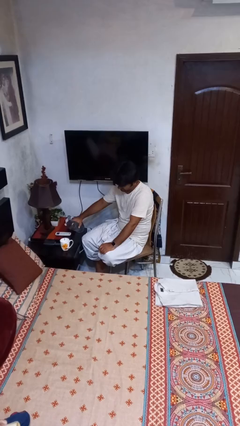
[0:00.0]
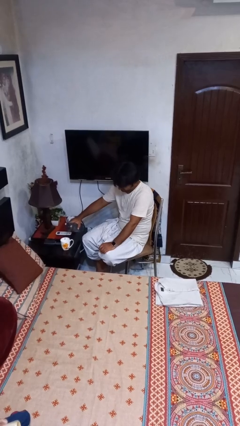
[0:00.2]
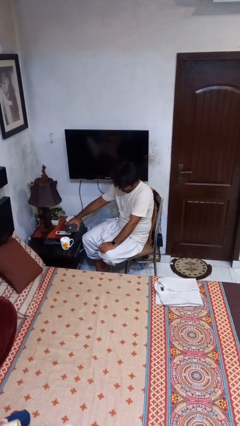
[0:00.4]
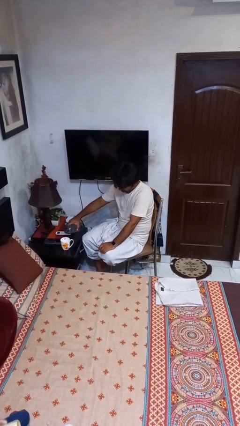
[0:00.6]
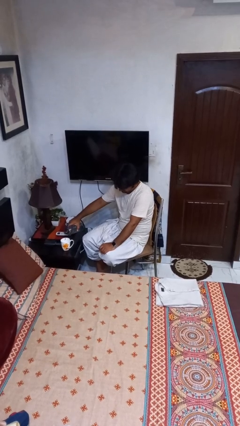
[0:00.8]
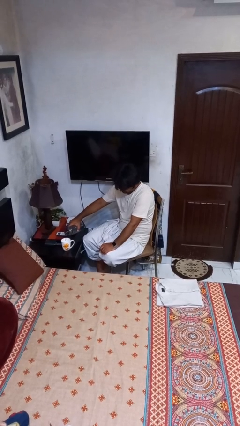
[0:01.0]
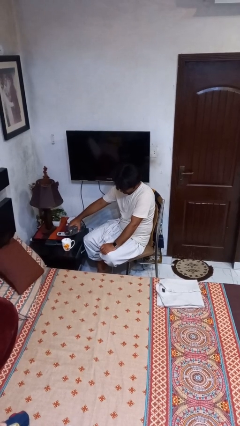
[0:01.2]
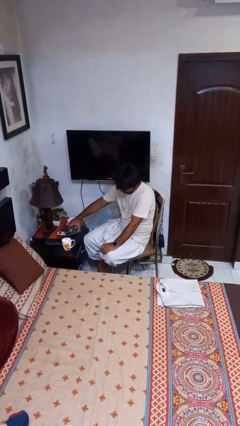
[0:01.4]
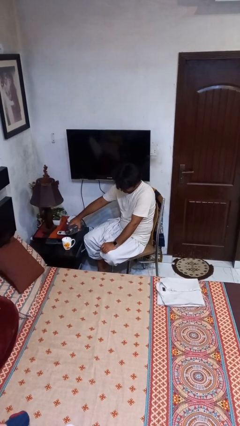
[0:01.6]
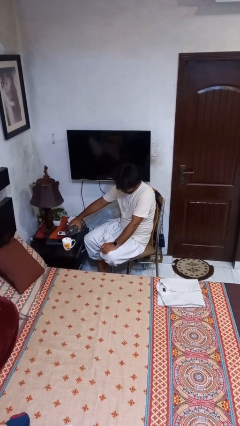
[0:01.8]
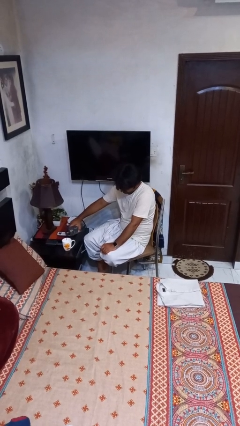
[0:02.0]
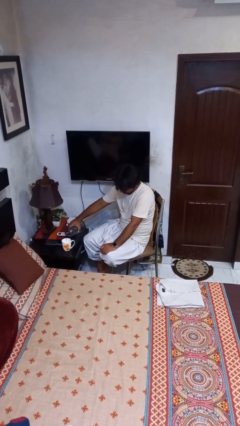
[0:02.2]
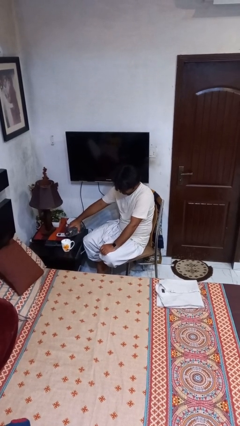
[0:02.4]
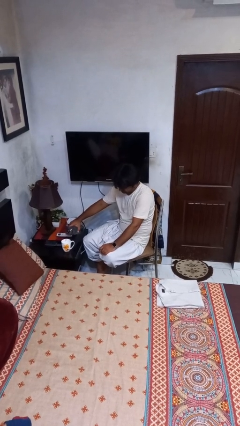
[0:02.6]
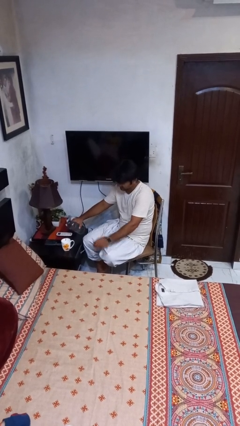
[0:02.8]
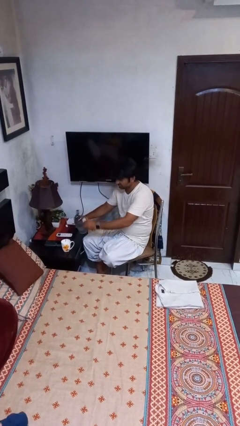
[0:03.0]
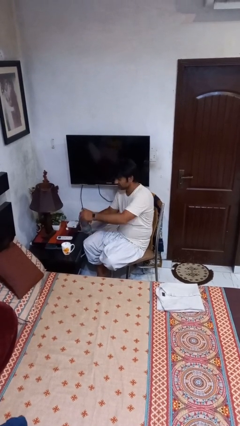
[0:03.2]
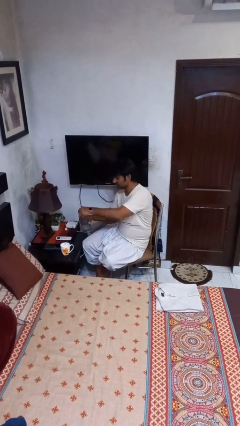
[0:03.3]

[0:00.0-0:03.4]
person pours liquid into cup

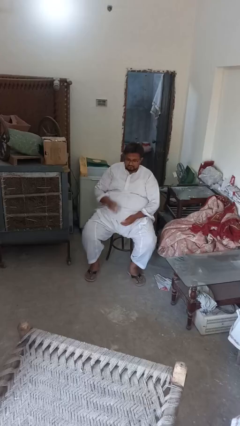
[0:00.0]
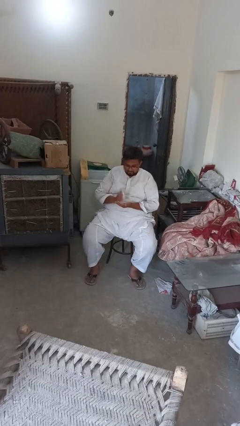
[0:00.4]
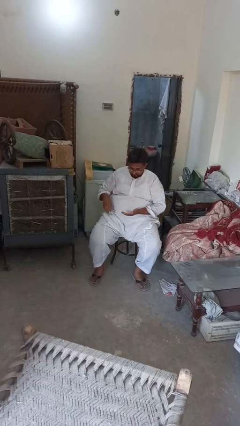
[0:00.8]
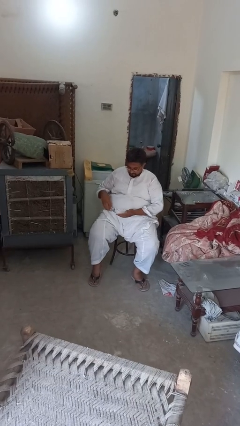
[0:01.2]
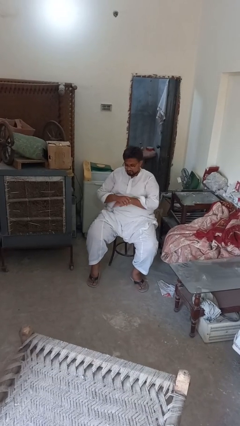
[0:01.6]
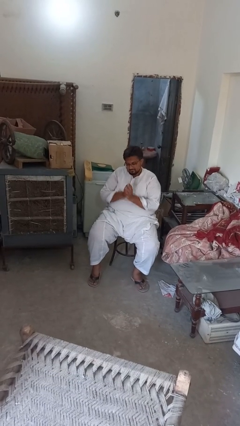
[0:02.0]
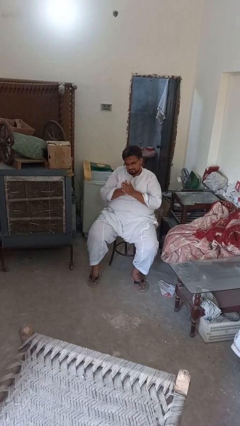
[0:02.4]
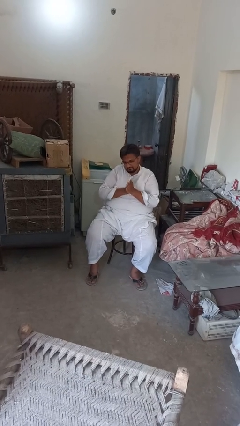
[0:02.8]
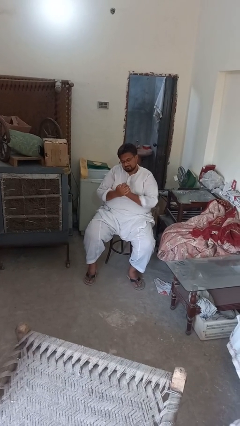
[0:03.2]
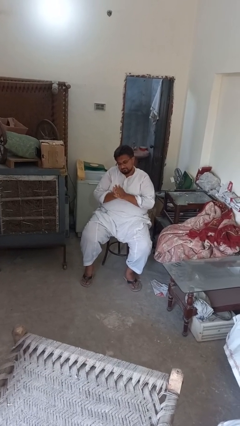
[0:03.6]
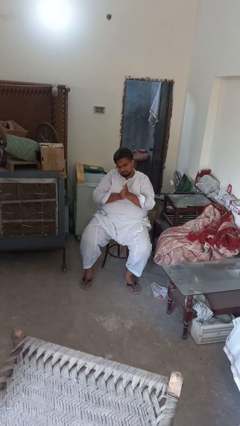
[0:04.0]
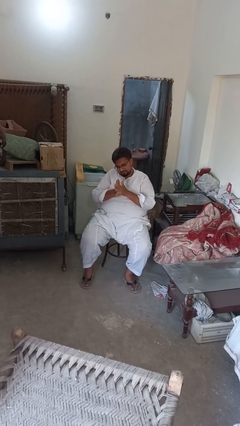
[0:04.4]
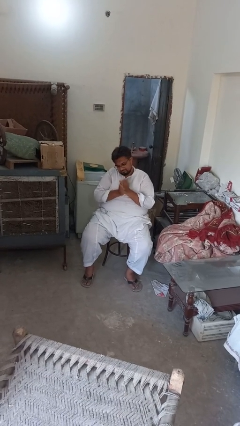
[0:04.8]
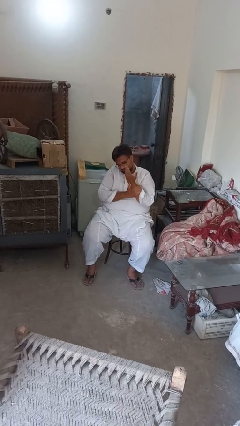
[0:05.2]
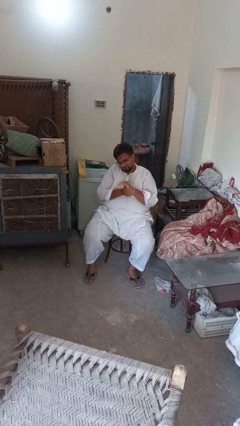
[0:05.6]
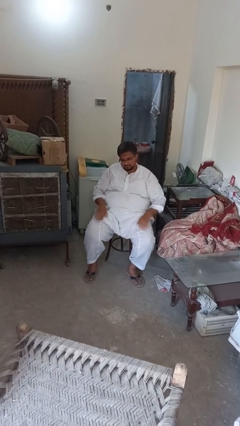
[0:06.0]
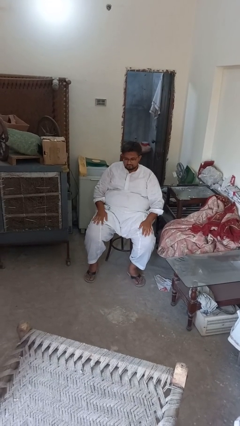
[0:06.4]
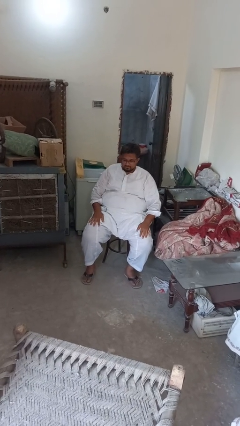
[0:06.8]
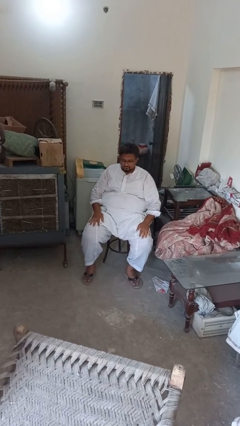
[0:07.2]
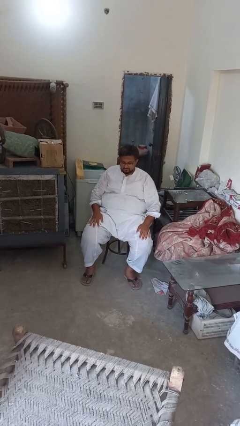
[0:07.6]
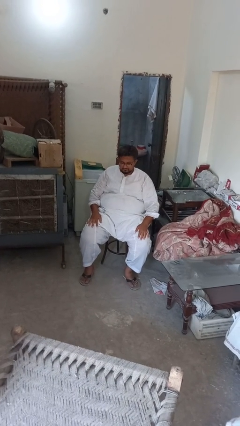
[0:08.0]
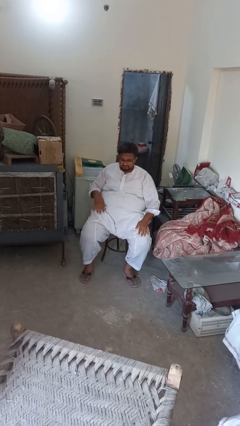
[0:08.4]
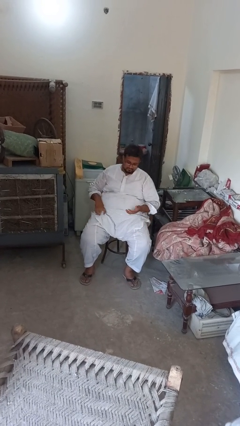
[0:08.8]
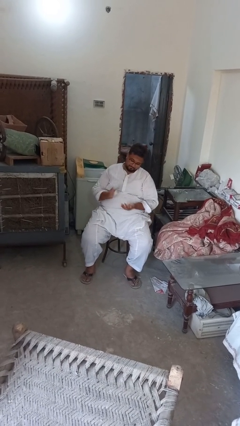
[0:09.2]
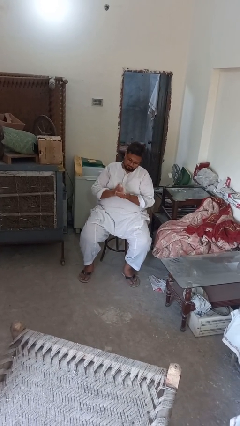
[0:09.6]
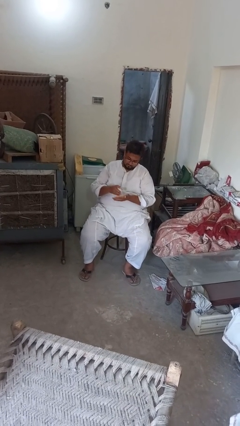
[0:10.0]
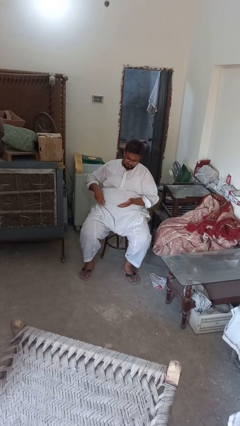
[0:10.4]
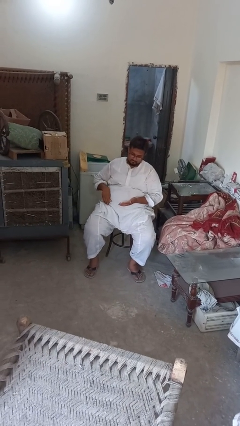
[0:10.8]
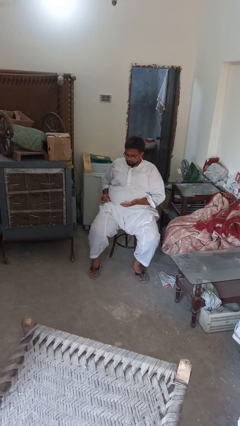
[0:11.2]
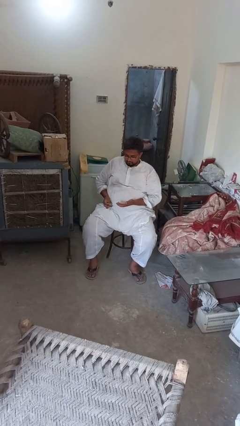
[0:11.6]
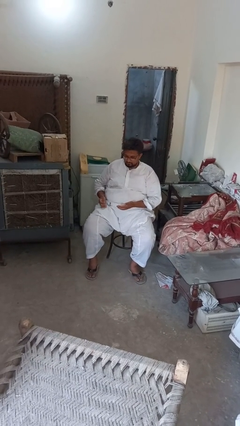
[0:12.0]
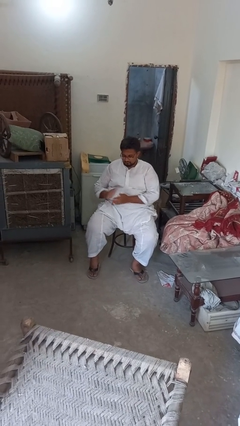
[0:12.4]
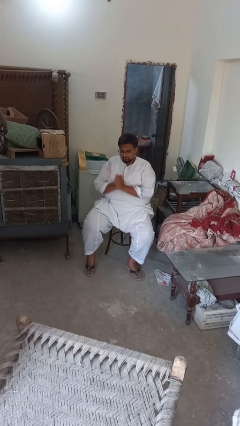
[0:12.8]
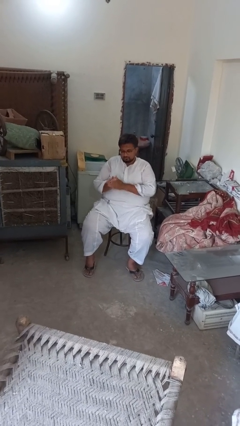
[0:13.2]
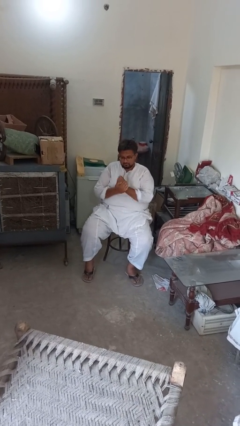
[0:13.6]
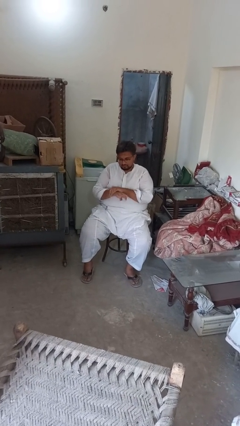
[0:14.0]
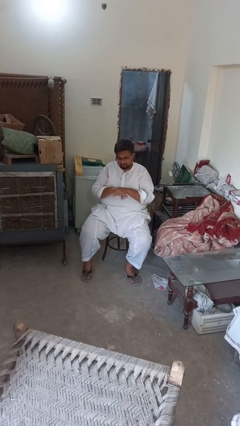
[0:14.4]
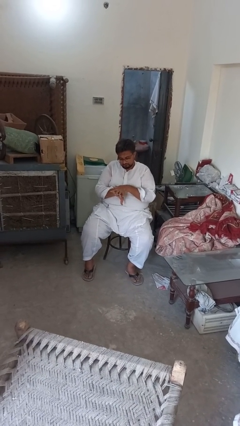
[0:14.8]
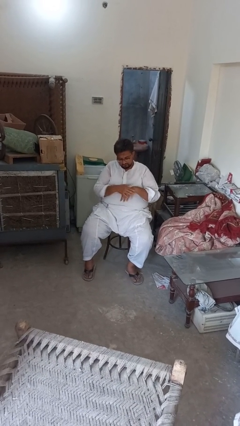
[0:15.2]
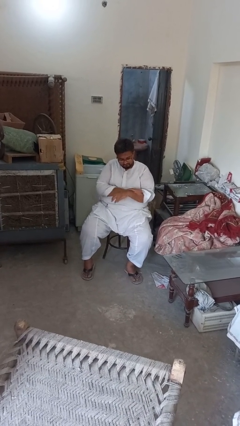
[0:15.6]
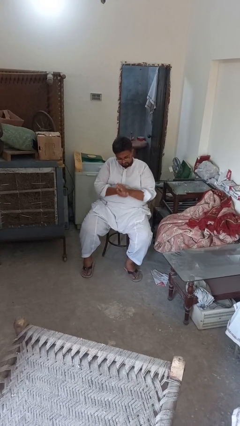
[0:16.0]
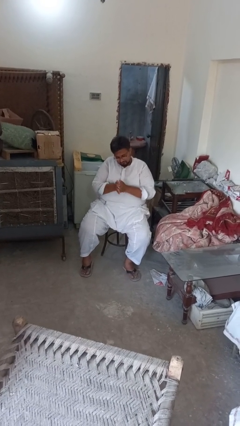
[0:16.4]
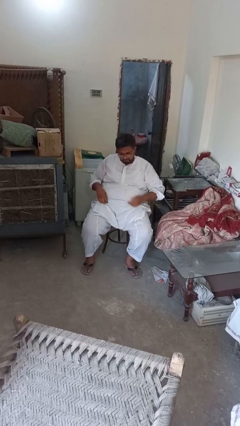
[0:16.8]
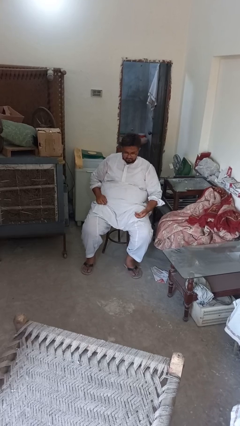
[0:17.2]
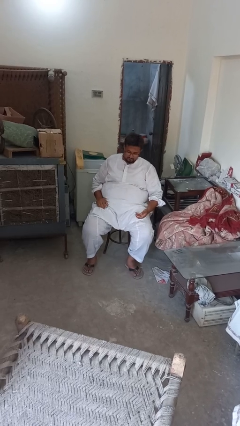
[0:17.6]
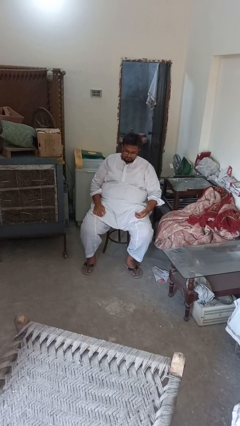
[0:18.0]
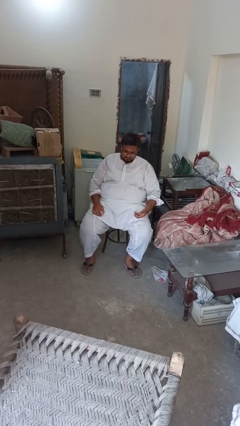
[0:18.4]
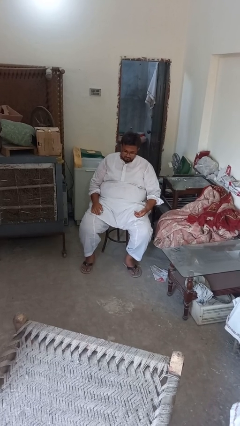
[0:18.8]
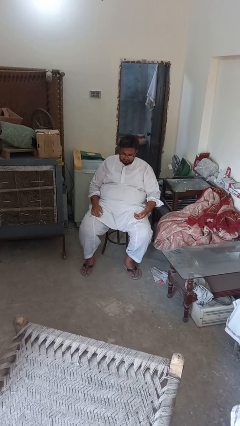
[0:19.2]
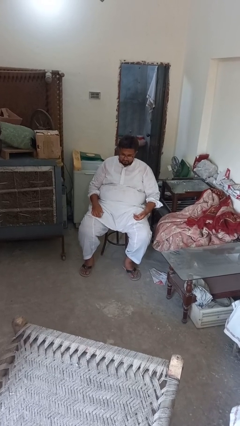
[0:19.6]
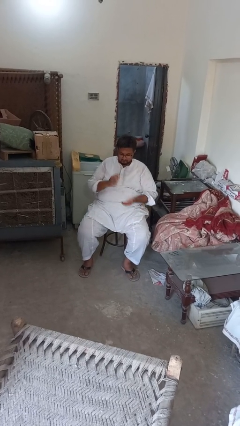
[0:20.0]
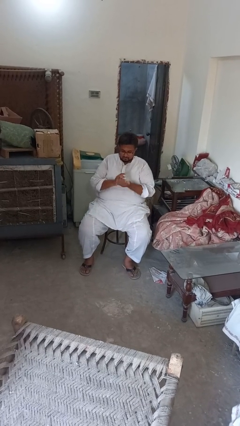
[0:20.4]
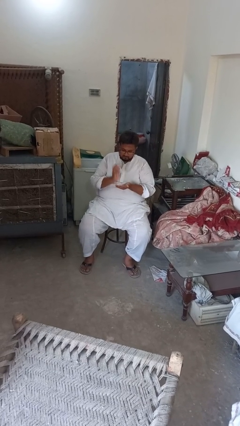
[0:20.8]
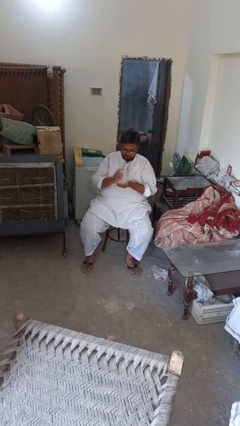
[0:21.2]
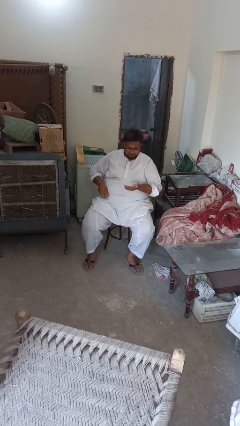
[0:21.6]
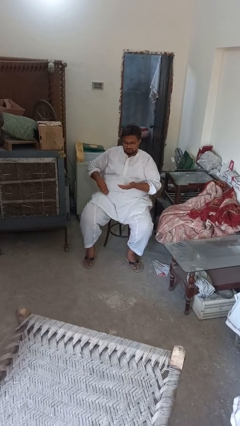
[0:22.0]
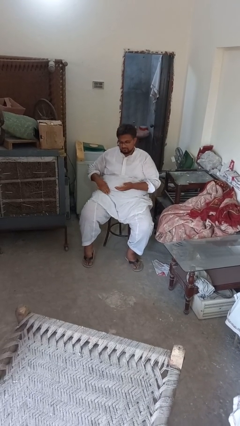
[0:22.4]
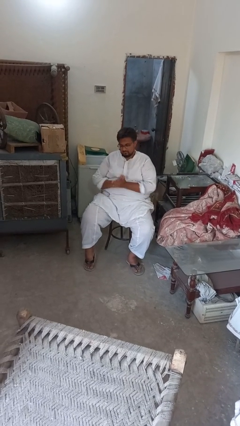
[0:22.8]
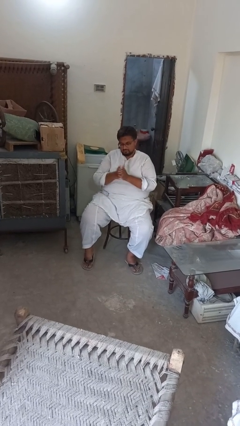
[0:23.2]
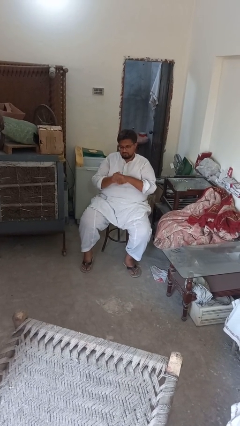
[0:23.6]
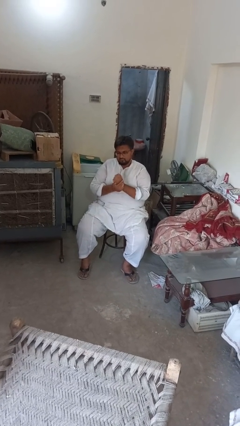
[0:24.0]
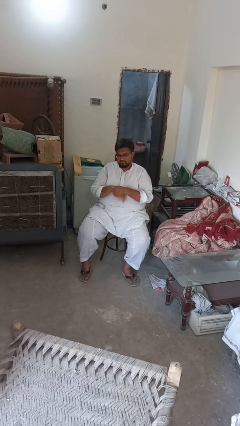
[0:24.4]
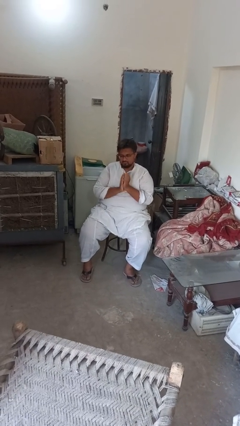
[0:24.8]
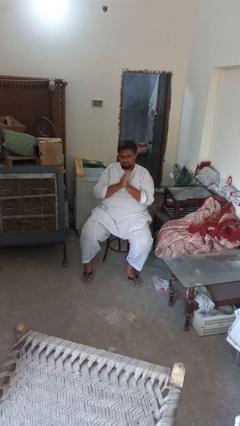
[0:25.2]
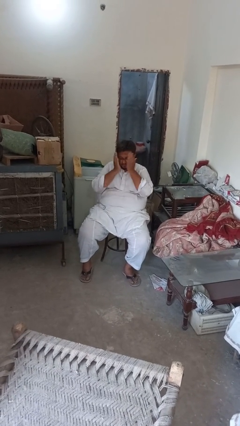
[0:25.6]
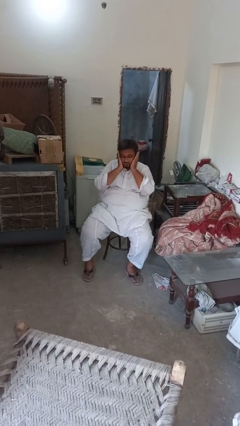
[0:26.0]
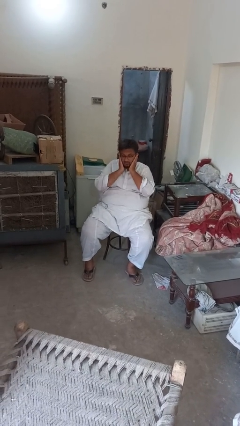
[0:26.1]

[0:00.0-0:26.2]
person applies sunscreen

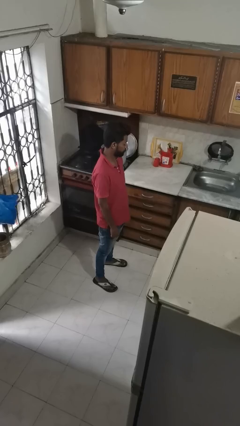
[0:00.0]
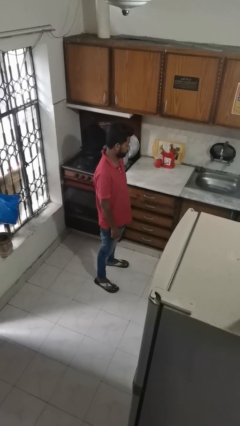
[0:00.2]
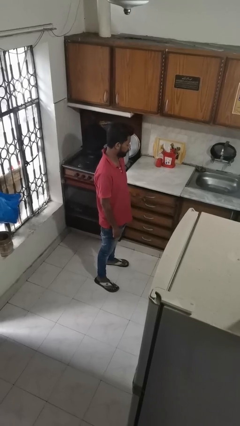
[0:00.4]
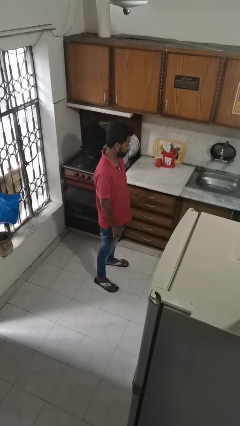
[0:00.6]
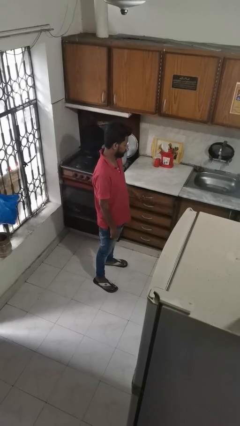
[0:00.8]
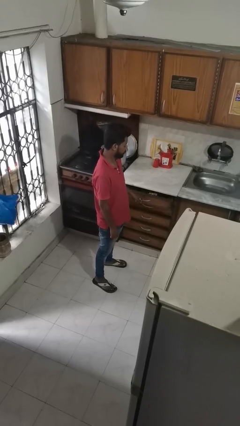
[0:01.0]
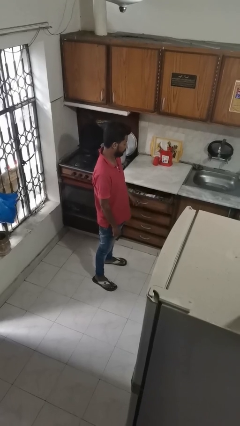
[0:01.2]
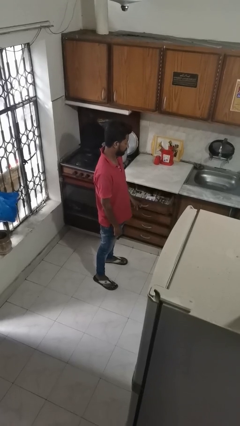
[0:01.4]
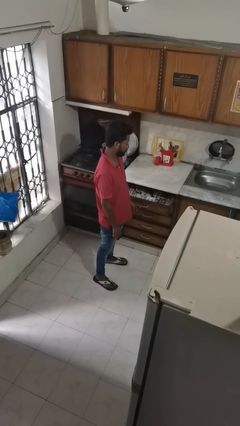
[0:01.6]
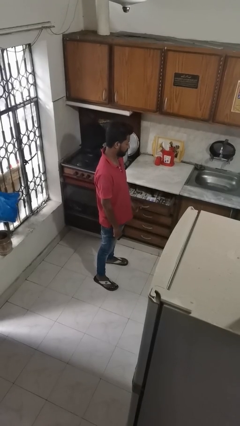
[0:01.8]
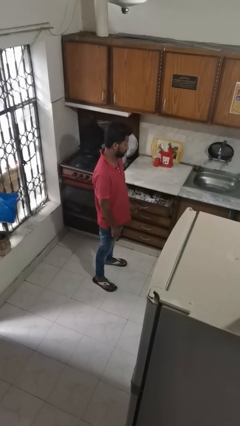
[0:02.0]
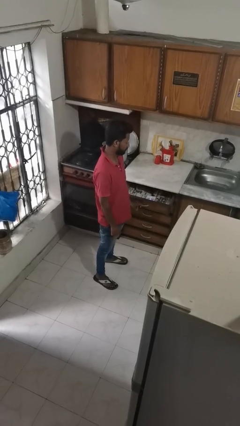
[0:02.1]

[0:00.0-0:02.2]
person opens kitchen drawer
